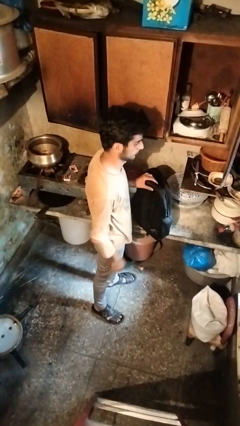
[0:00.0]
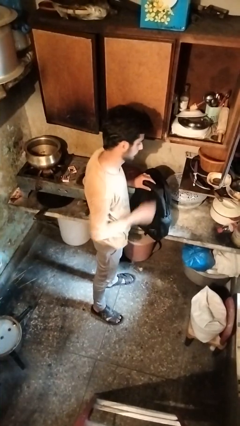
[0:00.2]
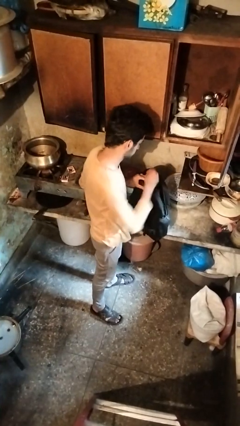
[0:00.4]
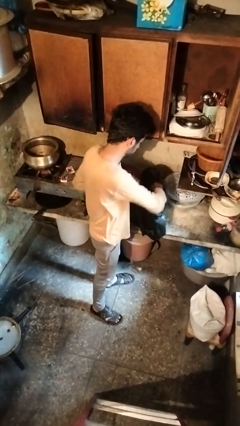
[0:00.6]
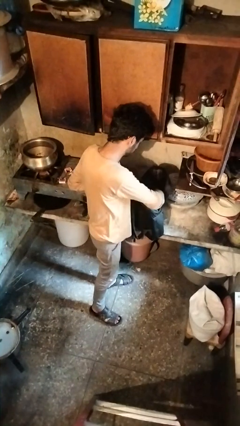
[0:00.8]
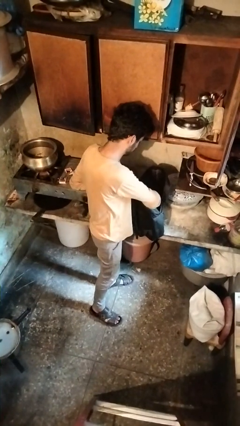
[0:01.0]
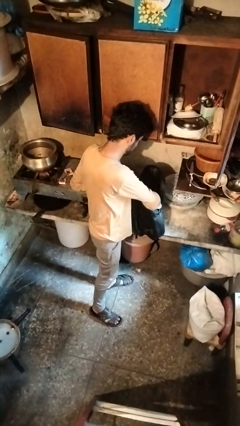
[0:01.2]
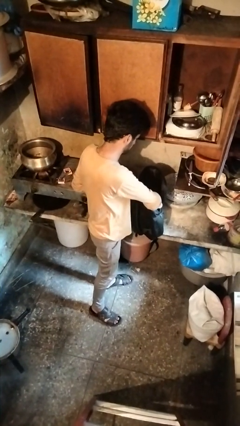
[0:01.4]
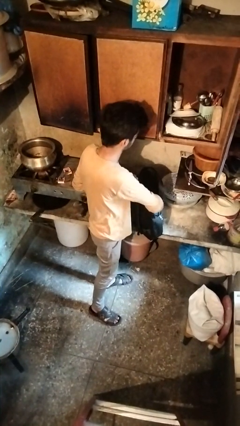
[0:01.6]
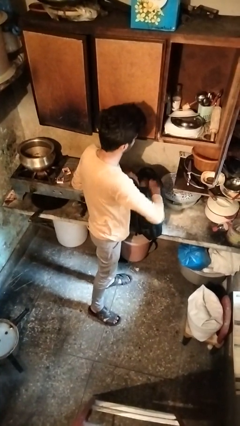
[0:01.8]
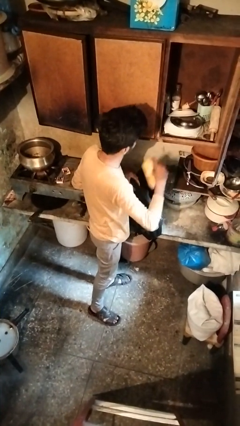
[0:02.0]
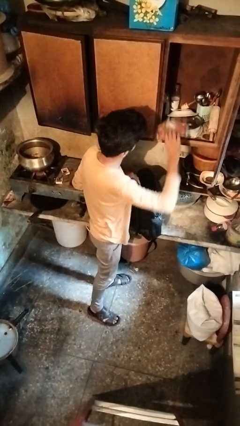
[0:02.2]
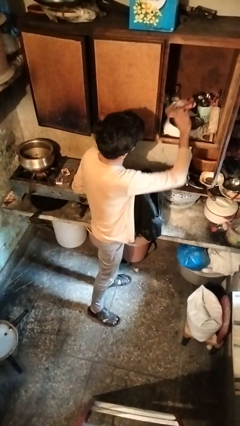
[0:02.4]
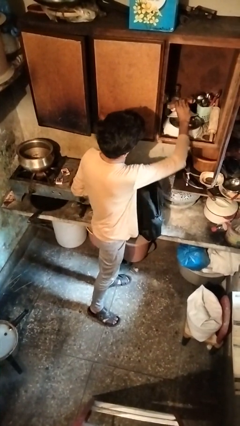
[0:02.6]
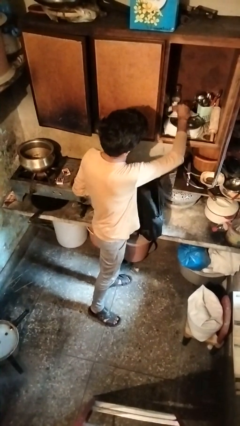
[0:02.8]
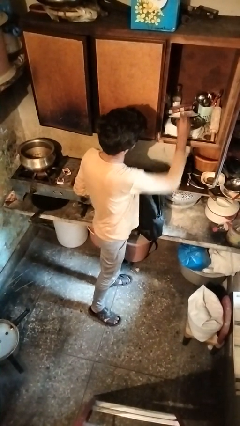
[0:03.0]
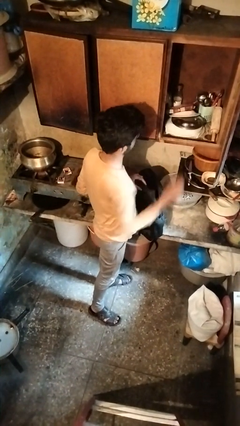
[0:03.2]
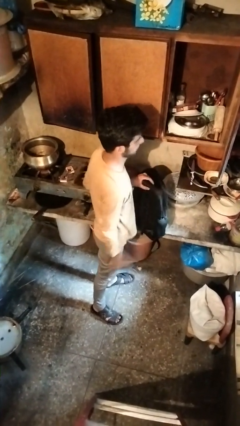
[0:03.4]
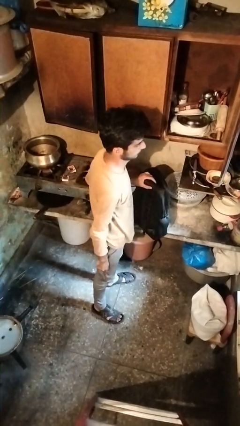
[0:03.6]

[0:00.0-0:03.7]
person loads groceries into cabinet

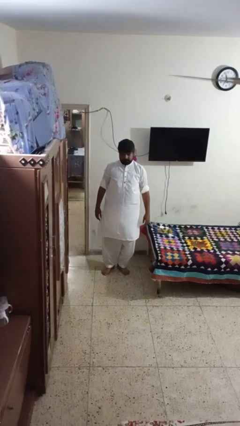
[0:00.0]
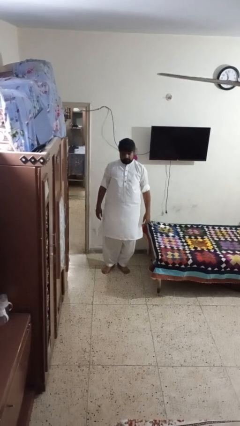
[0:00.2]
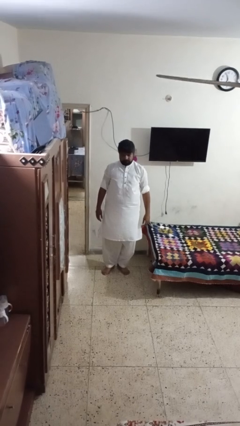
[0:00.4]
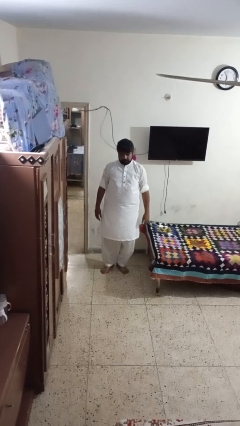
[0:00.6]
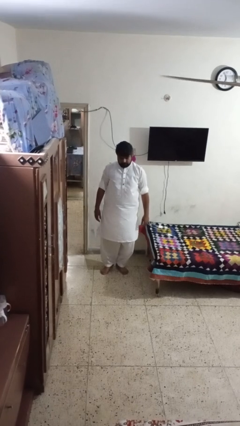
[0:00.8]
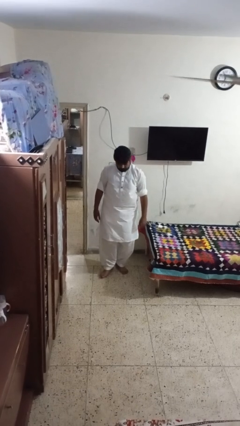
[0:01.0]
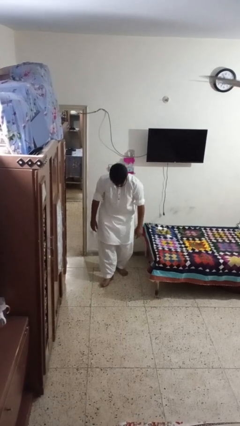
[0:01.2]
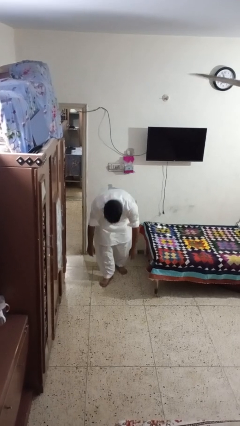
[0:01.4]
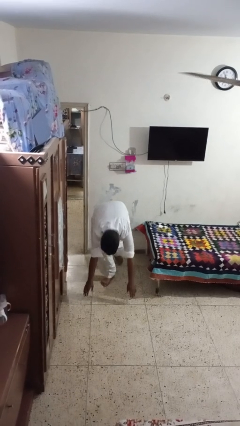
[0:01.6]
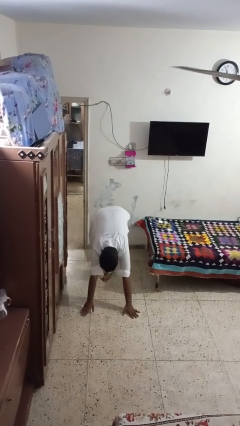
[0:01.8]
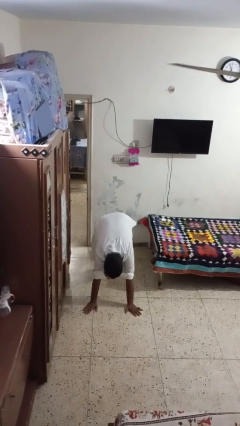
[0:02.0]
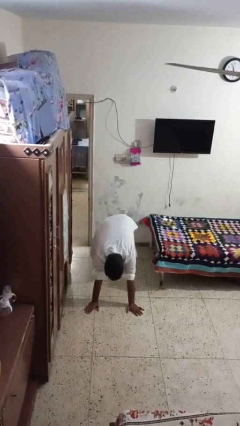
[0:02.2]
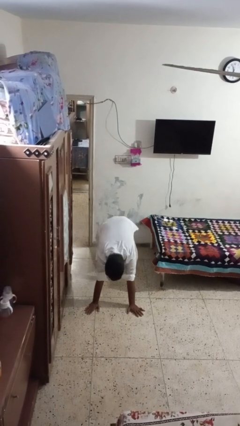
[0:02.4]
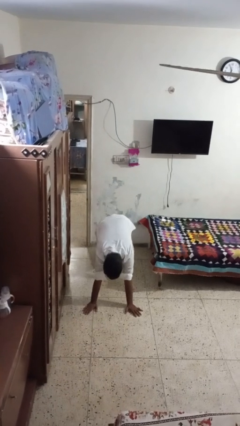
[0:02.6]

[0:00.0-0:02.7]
person exercises with plank

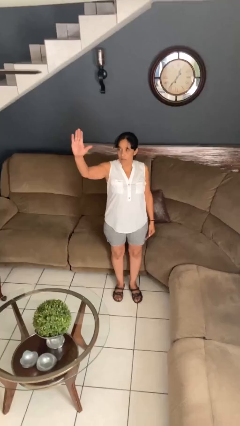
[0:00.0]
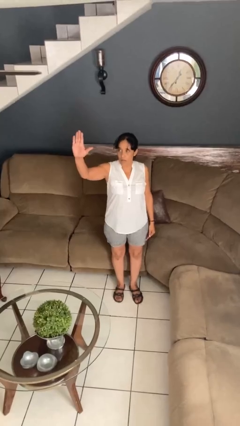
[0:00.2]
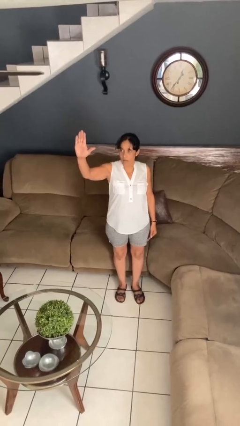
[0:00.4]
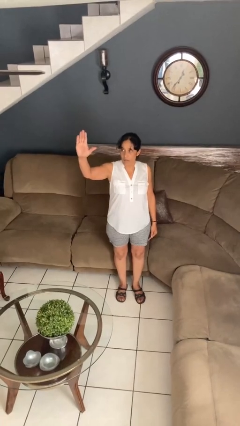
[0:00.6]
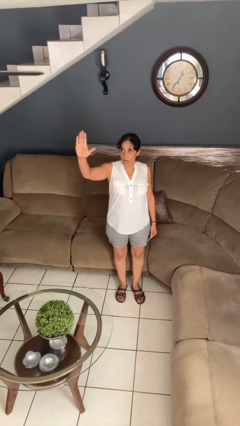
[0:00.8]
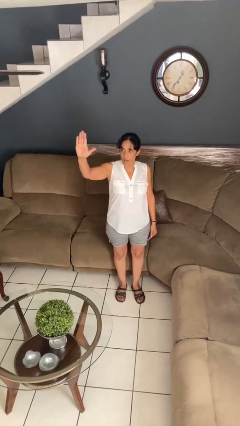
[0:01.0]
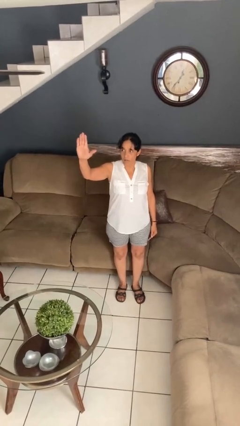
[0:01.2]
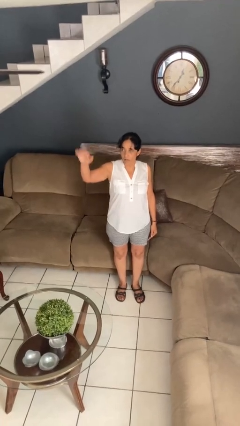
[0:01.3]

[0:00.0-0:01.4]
person gestures stop

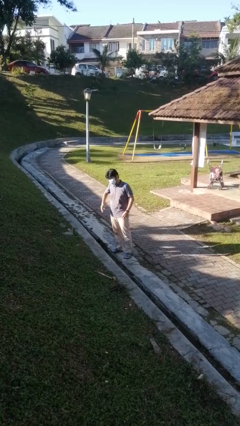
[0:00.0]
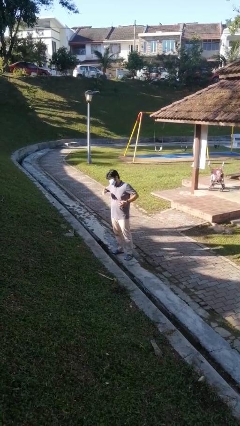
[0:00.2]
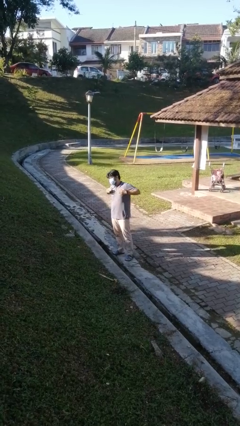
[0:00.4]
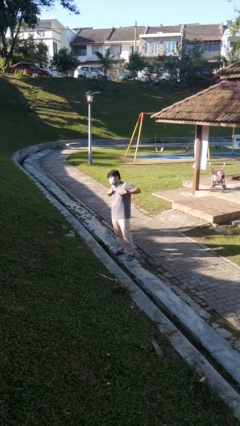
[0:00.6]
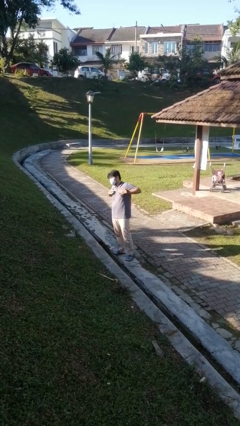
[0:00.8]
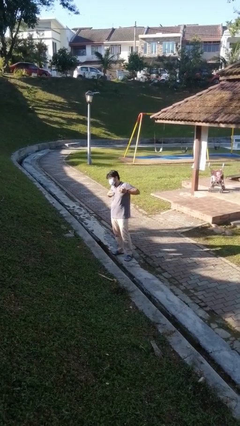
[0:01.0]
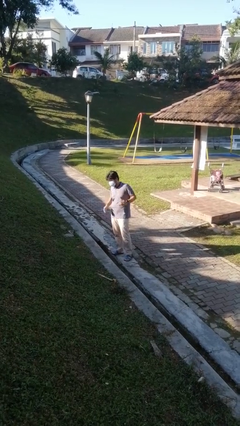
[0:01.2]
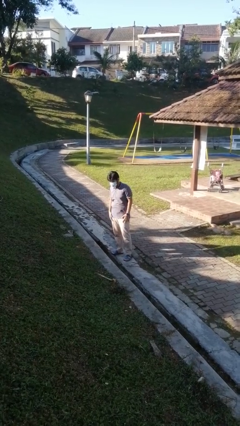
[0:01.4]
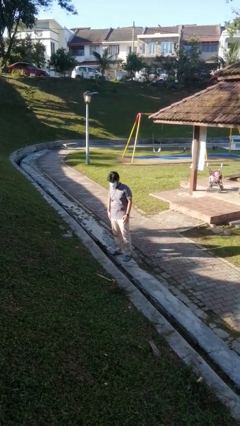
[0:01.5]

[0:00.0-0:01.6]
person drums on chest

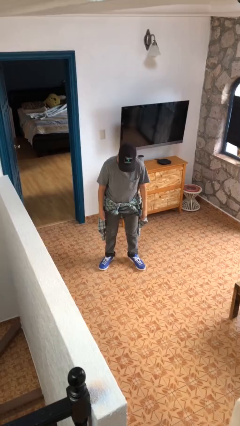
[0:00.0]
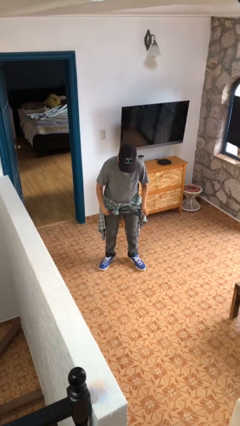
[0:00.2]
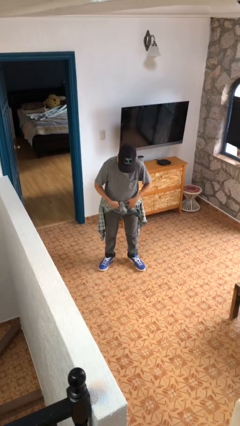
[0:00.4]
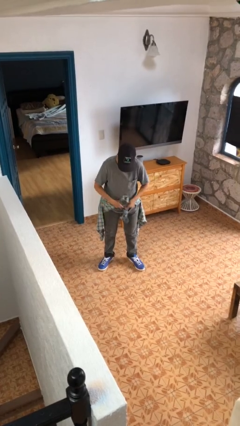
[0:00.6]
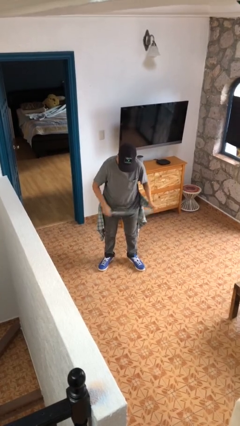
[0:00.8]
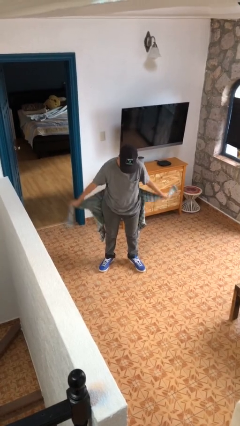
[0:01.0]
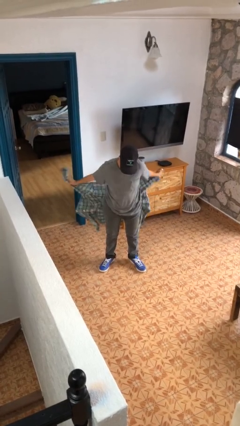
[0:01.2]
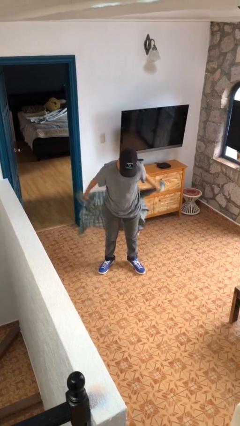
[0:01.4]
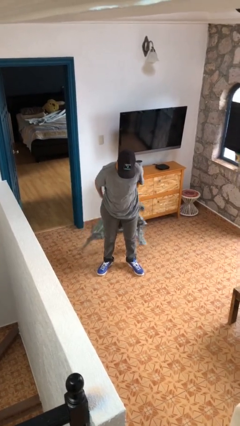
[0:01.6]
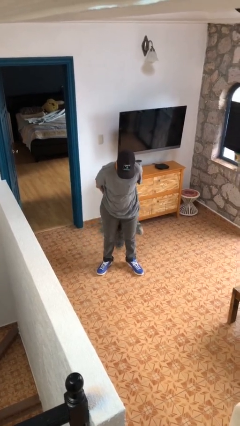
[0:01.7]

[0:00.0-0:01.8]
person unties jacket around waist

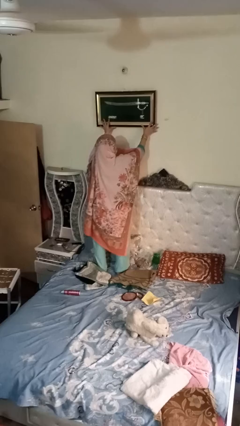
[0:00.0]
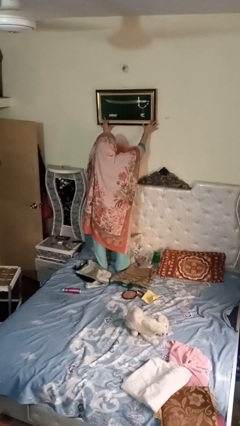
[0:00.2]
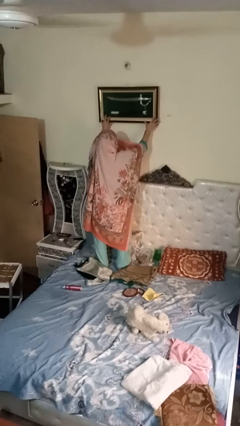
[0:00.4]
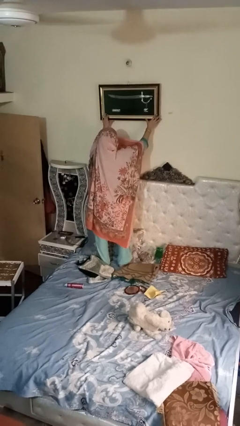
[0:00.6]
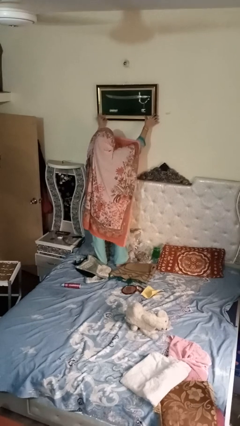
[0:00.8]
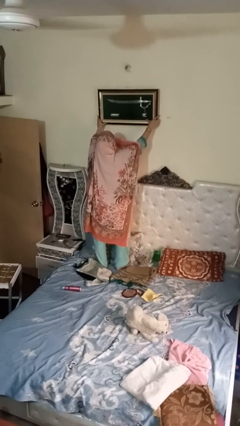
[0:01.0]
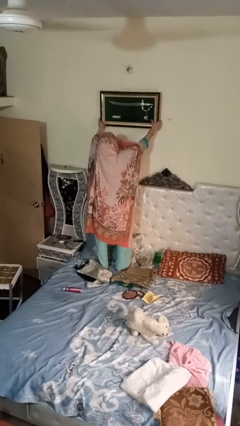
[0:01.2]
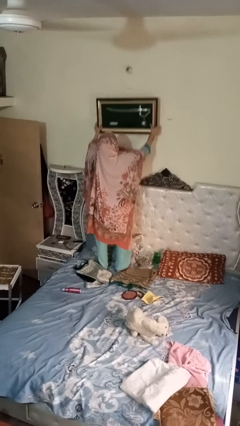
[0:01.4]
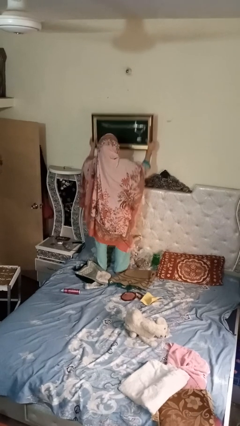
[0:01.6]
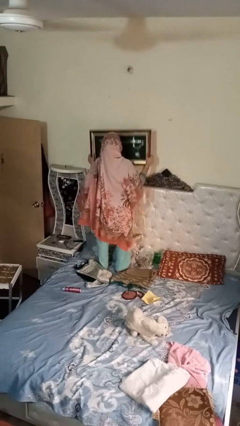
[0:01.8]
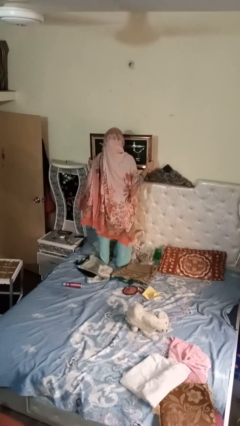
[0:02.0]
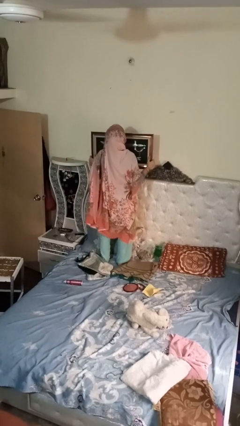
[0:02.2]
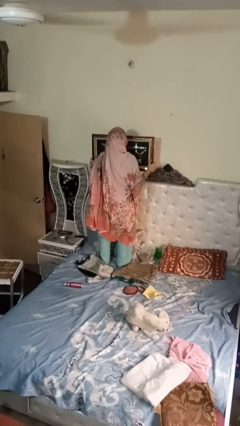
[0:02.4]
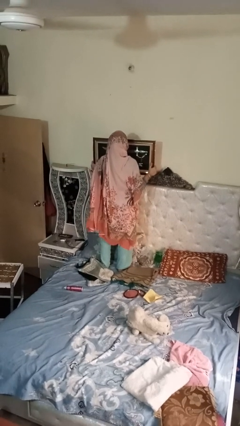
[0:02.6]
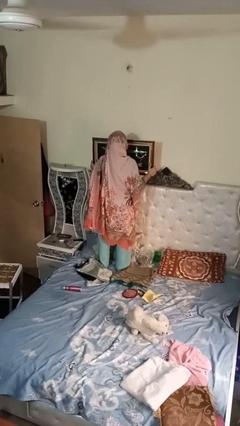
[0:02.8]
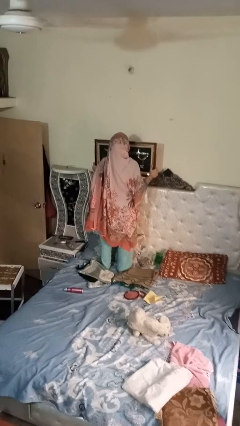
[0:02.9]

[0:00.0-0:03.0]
person puts up picture frame

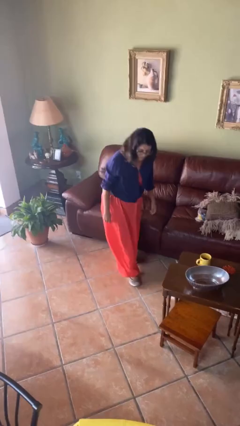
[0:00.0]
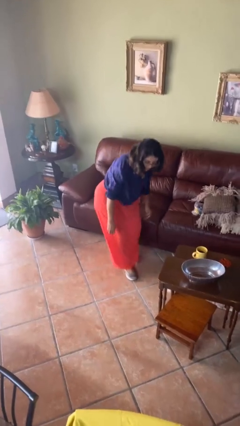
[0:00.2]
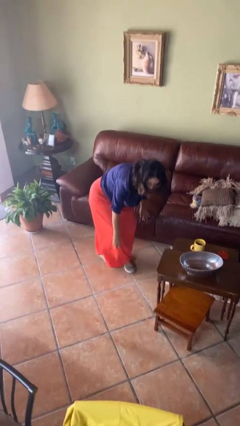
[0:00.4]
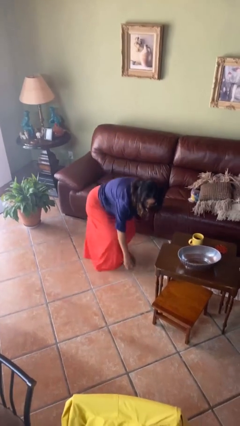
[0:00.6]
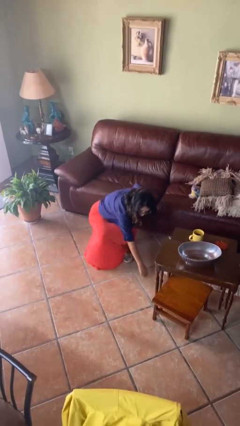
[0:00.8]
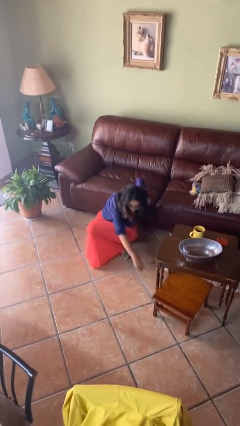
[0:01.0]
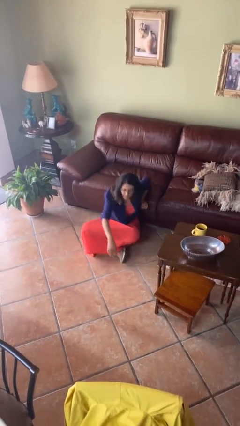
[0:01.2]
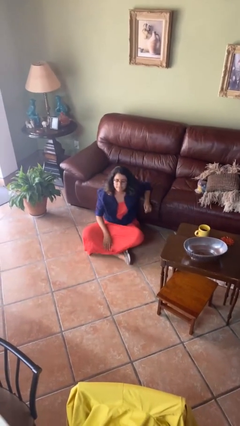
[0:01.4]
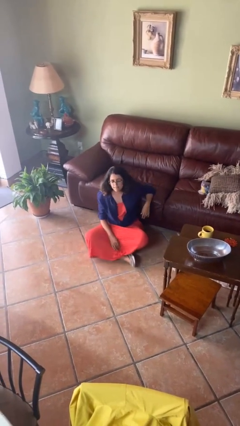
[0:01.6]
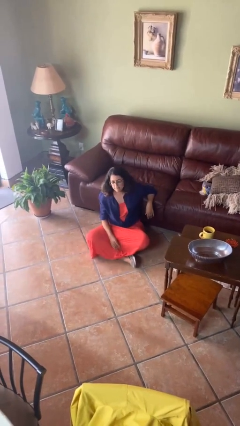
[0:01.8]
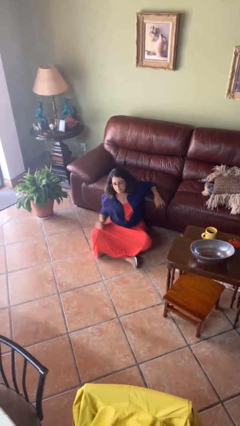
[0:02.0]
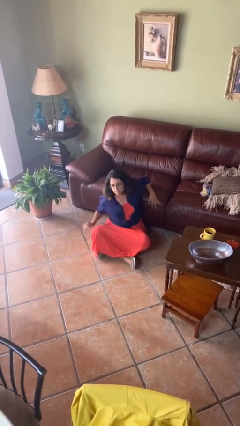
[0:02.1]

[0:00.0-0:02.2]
person sits crisscross

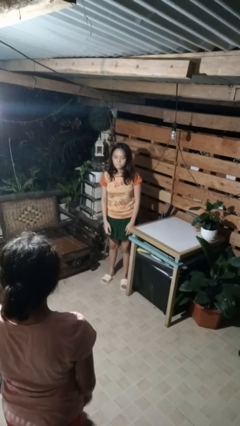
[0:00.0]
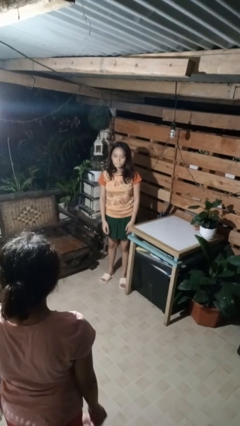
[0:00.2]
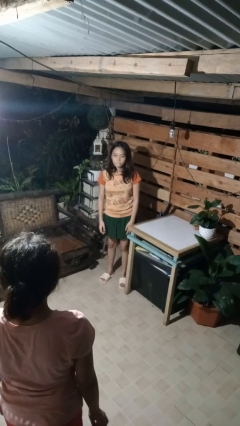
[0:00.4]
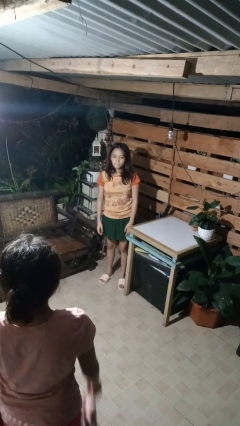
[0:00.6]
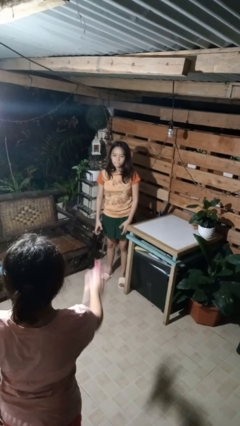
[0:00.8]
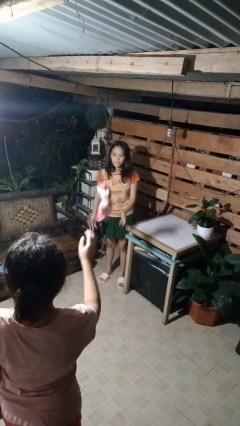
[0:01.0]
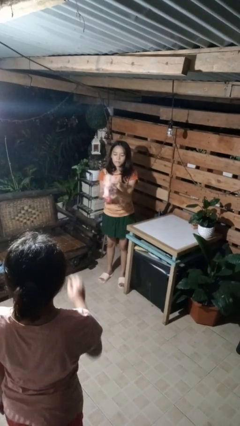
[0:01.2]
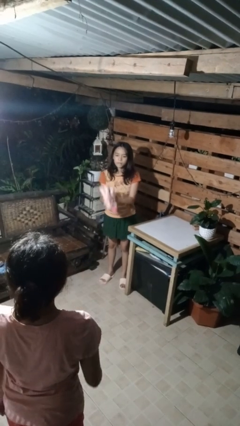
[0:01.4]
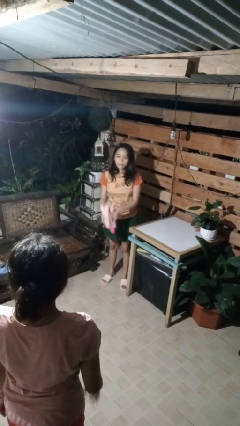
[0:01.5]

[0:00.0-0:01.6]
person catches object from person
